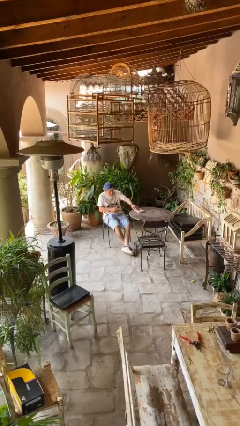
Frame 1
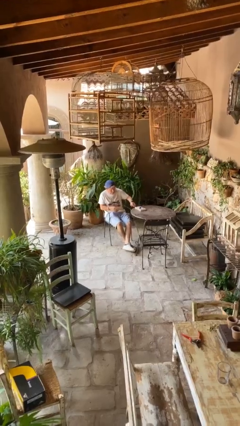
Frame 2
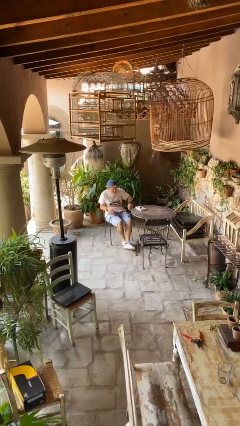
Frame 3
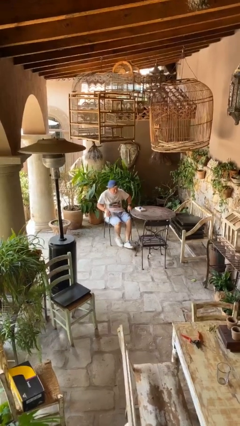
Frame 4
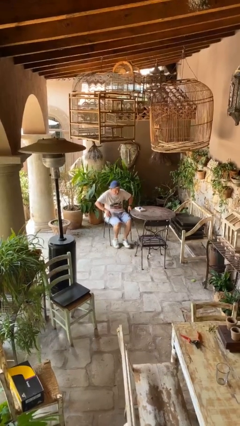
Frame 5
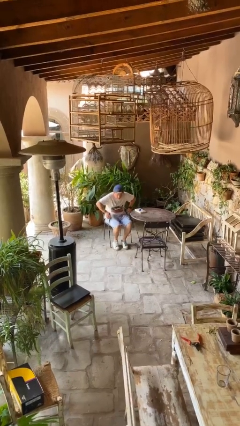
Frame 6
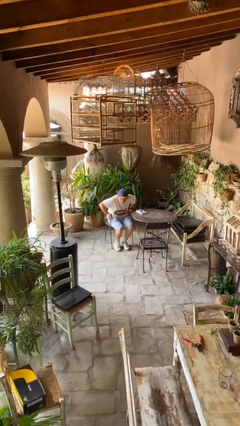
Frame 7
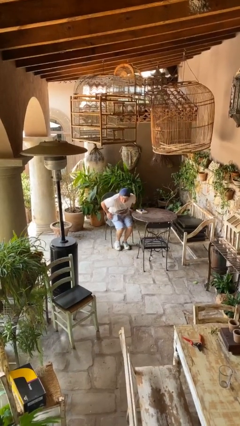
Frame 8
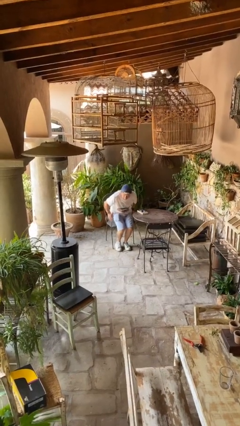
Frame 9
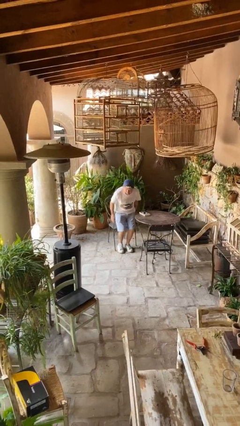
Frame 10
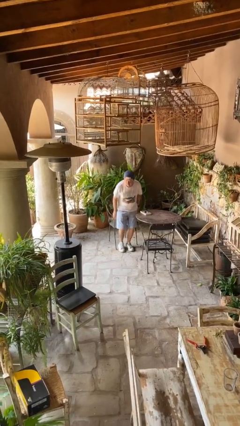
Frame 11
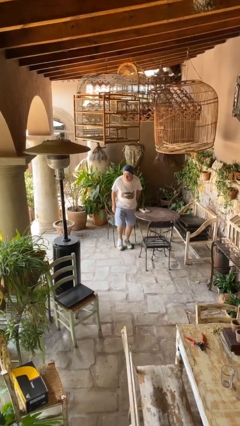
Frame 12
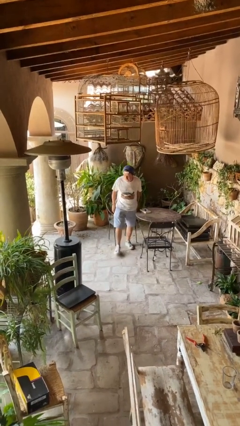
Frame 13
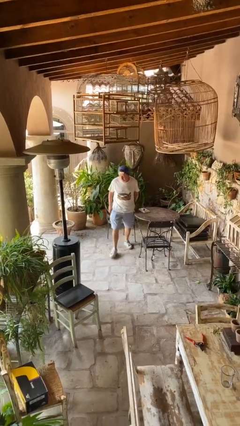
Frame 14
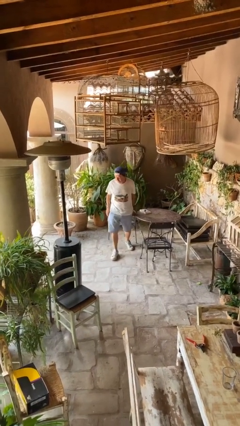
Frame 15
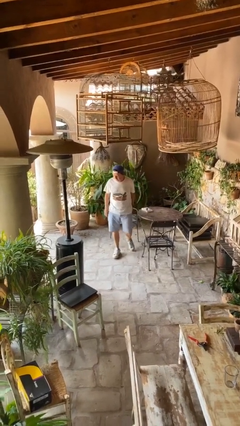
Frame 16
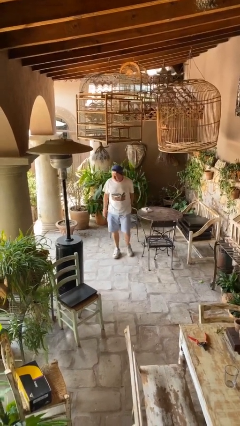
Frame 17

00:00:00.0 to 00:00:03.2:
person stands up

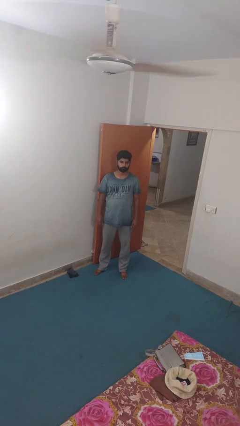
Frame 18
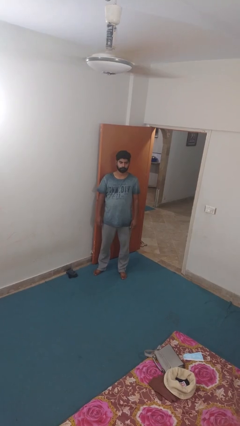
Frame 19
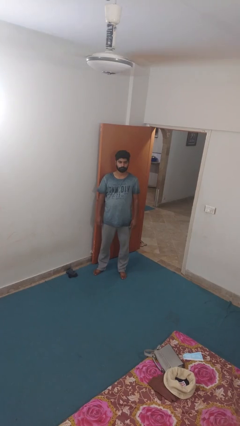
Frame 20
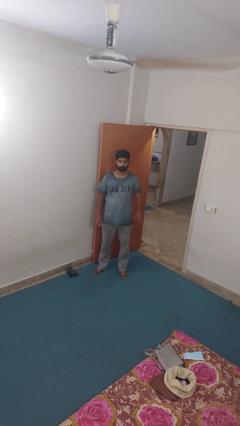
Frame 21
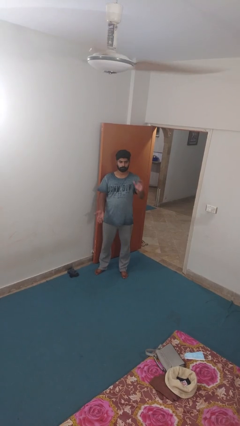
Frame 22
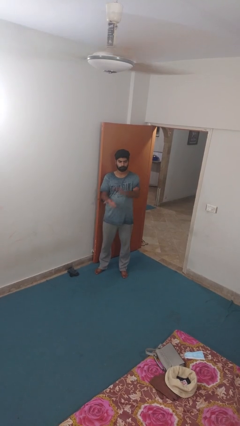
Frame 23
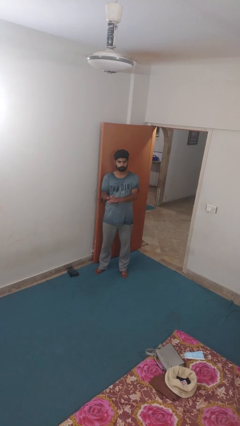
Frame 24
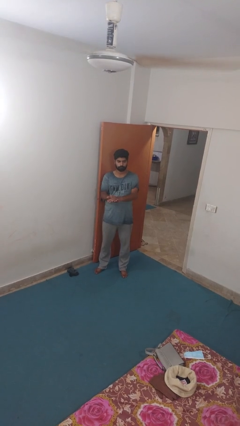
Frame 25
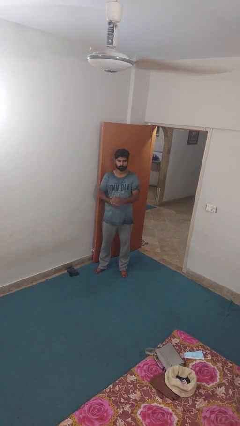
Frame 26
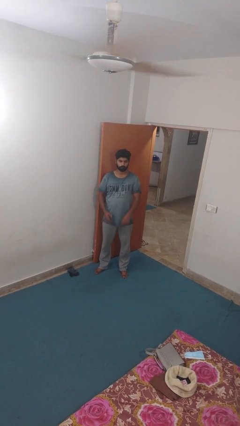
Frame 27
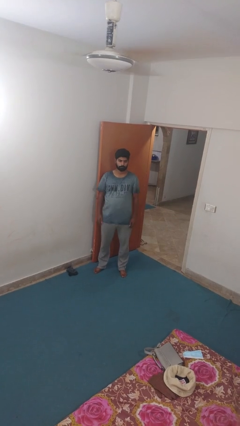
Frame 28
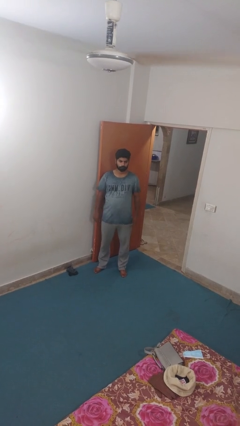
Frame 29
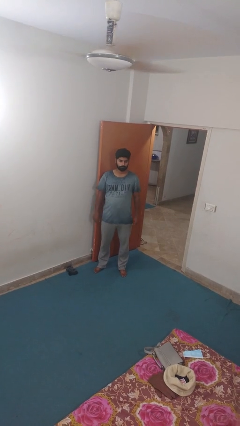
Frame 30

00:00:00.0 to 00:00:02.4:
person claps hands

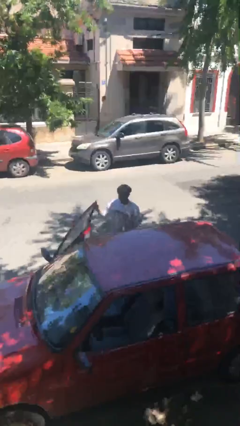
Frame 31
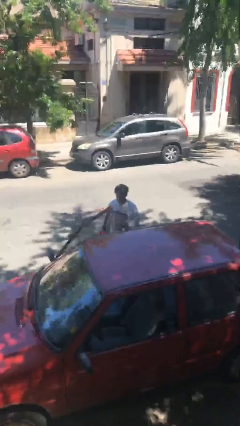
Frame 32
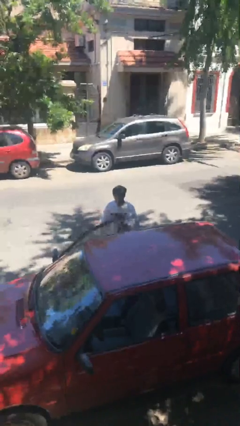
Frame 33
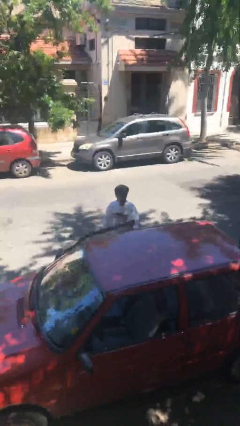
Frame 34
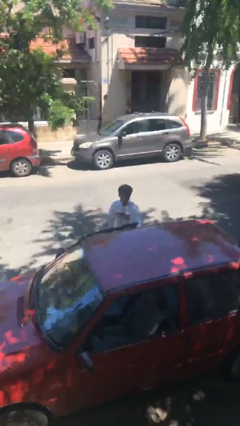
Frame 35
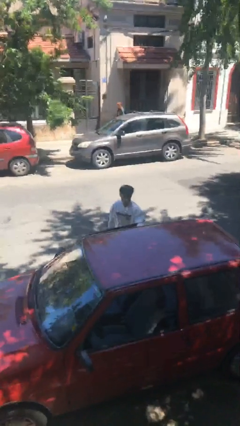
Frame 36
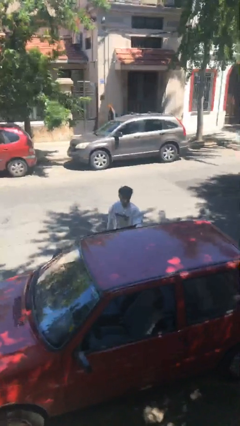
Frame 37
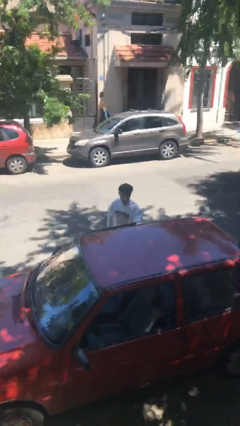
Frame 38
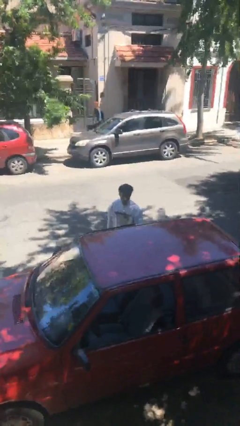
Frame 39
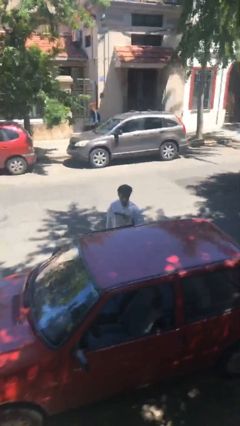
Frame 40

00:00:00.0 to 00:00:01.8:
person closes car door

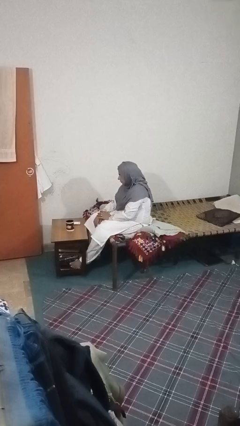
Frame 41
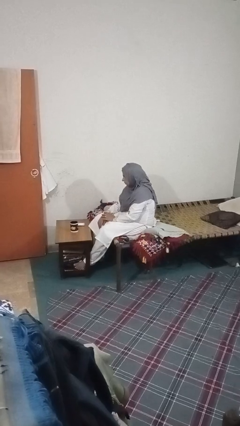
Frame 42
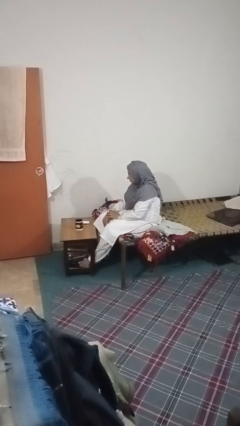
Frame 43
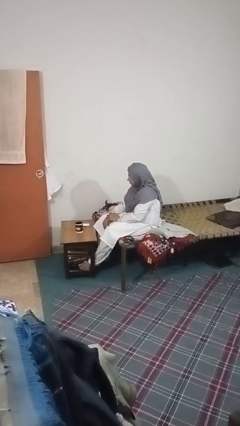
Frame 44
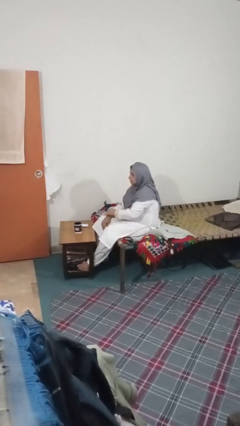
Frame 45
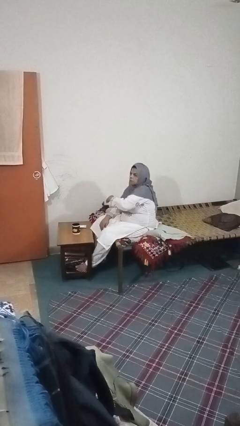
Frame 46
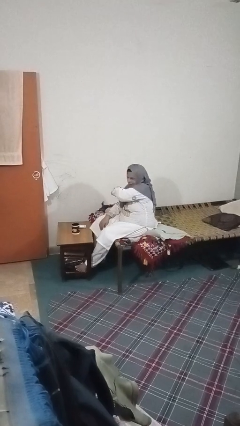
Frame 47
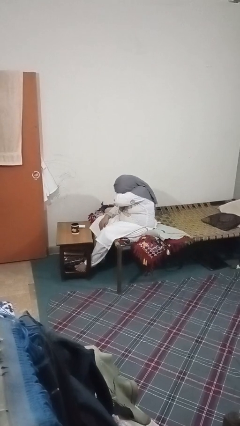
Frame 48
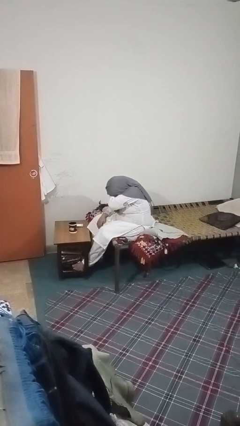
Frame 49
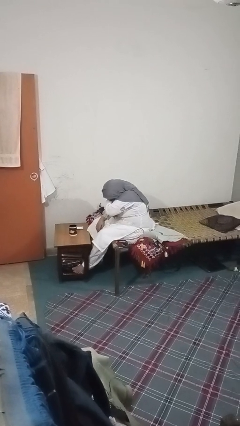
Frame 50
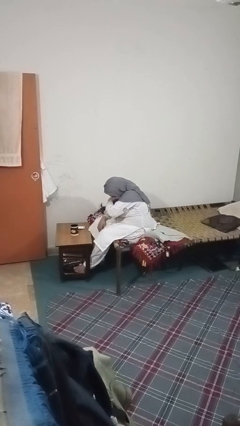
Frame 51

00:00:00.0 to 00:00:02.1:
person sneezes into arm

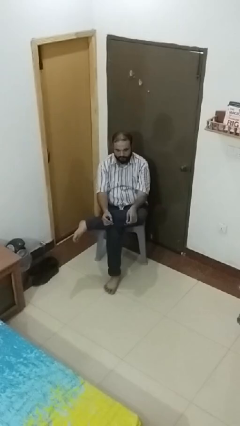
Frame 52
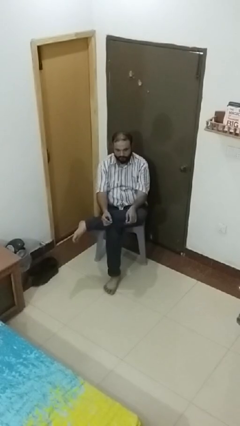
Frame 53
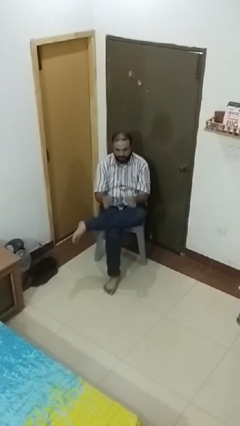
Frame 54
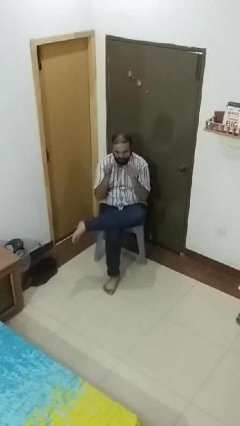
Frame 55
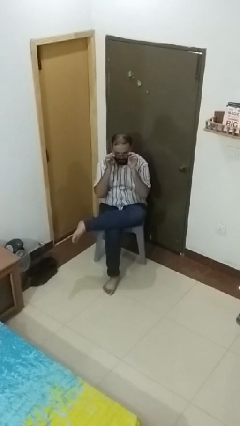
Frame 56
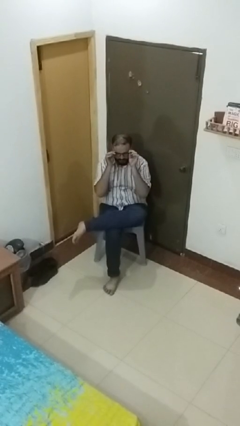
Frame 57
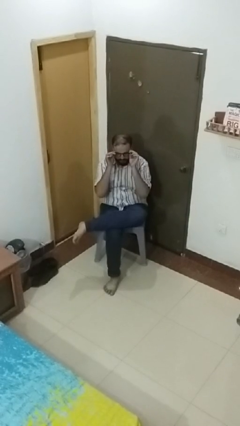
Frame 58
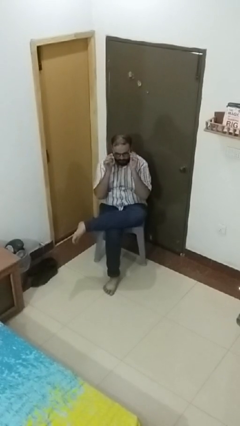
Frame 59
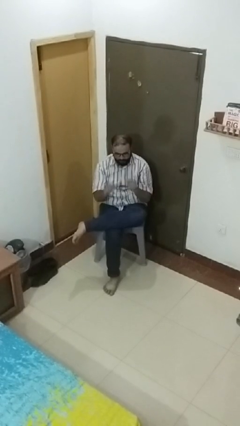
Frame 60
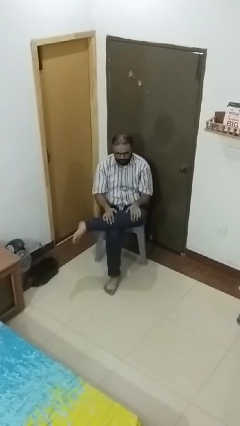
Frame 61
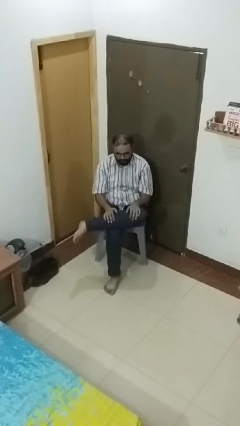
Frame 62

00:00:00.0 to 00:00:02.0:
person puts on glasses

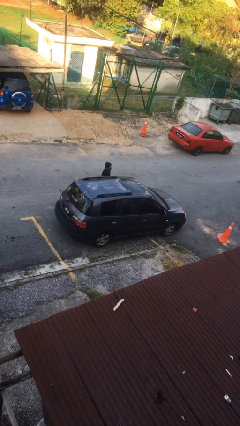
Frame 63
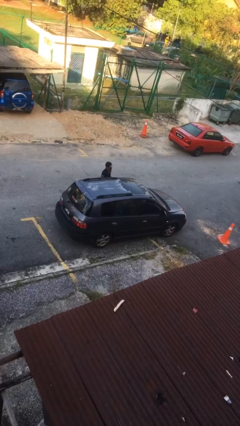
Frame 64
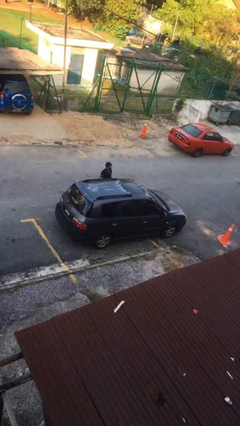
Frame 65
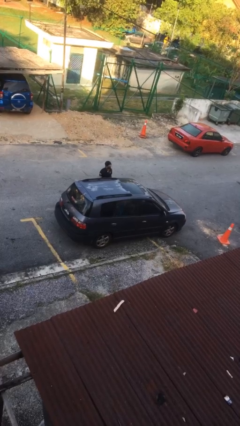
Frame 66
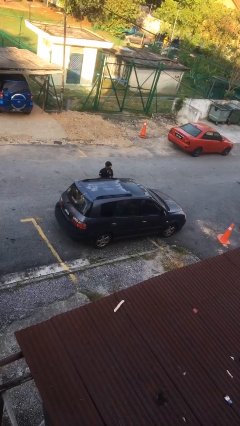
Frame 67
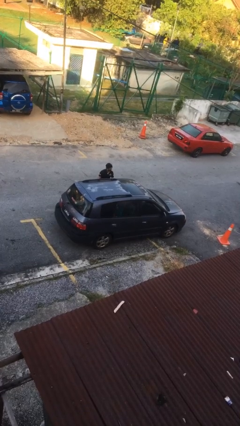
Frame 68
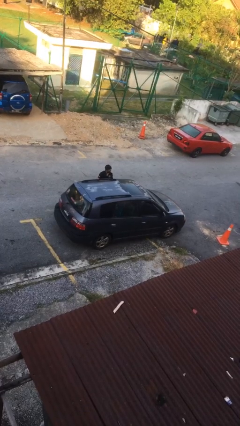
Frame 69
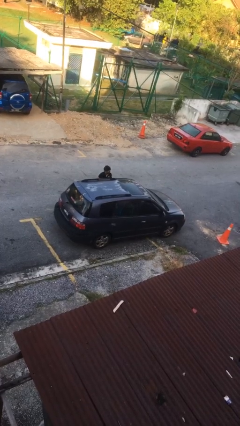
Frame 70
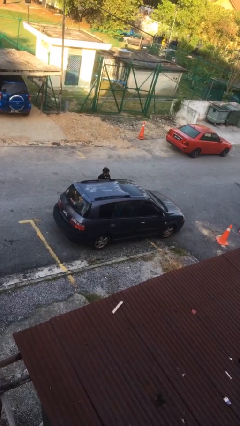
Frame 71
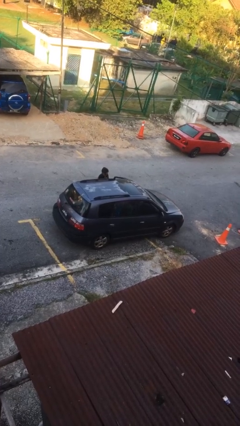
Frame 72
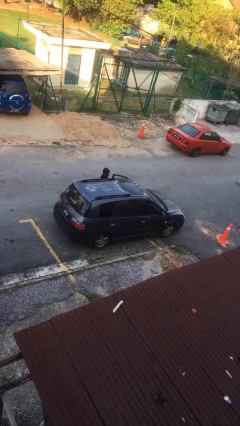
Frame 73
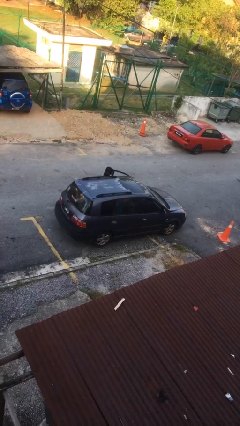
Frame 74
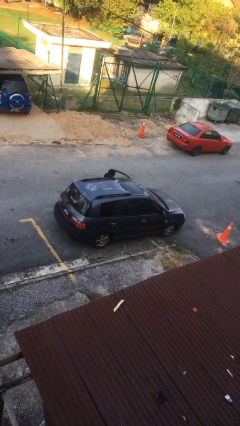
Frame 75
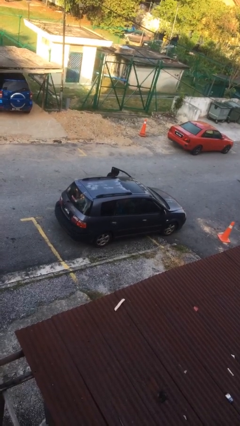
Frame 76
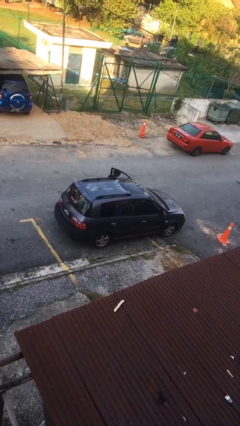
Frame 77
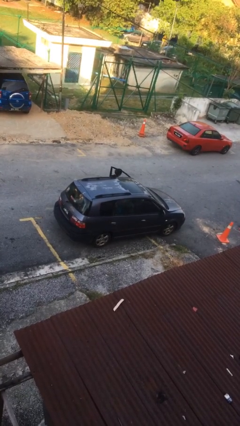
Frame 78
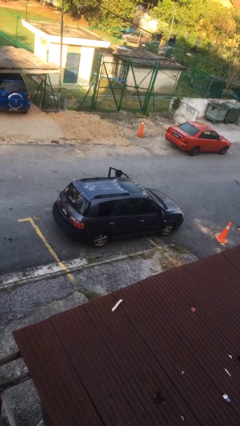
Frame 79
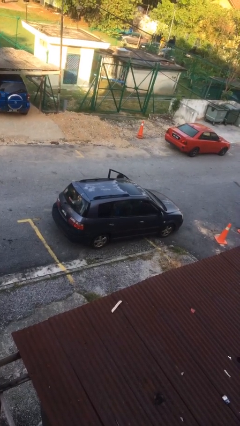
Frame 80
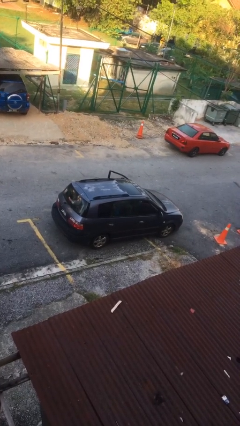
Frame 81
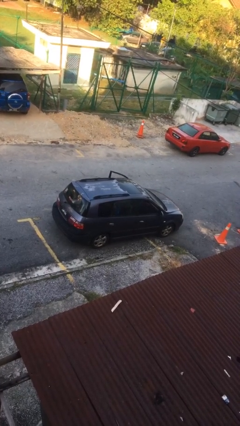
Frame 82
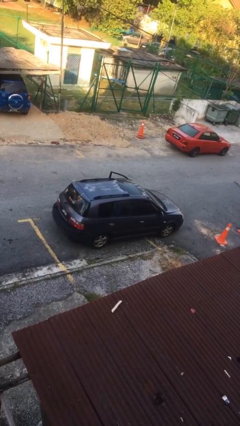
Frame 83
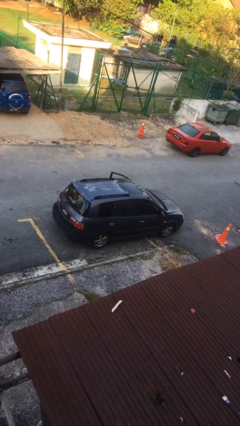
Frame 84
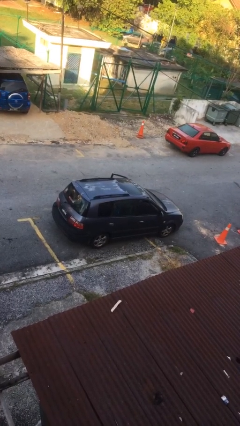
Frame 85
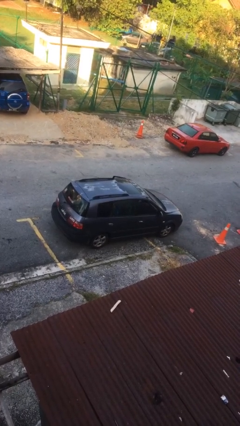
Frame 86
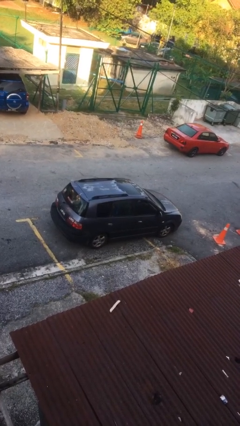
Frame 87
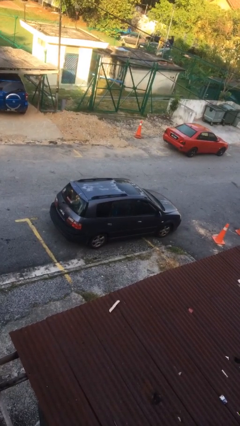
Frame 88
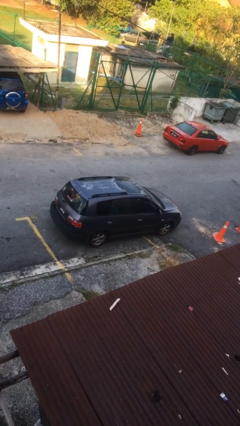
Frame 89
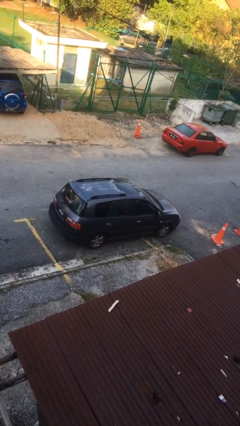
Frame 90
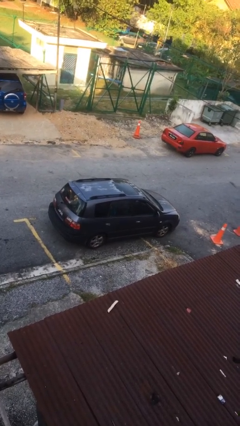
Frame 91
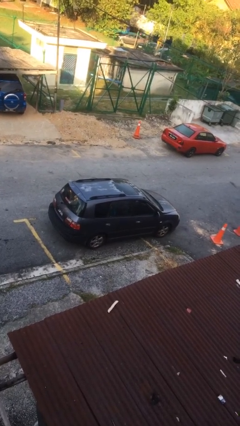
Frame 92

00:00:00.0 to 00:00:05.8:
car picks up person
